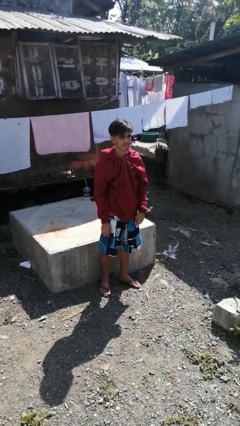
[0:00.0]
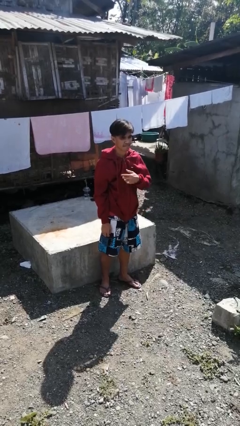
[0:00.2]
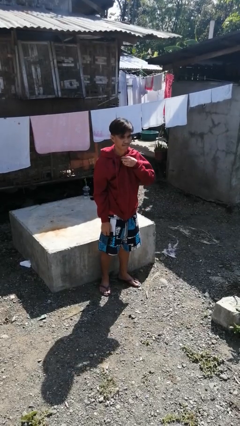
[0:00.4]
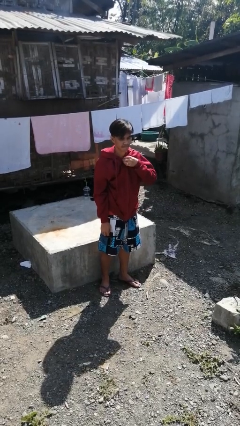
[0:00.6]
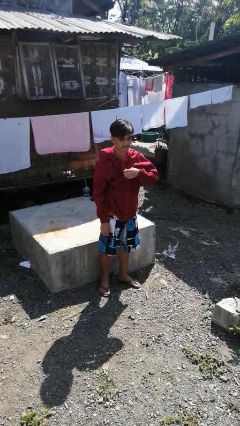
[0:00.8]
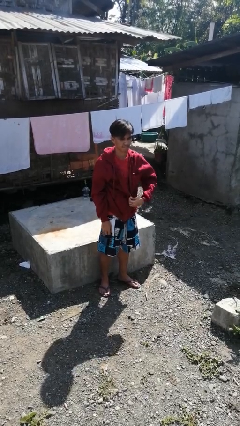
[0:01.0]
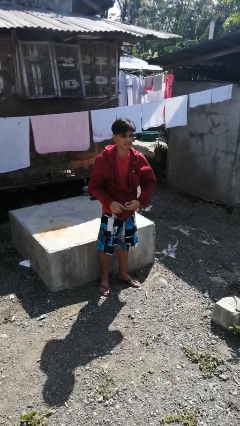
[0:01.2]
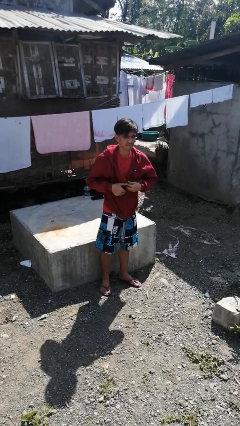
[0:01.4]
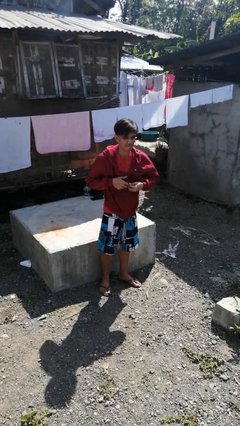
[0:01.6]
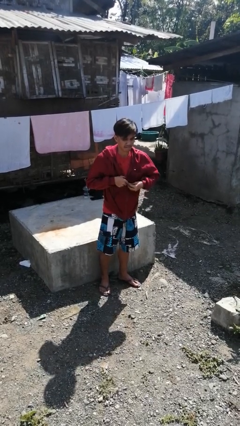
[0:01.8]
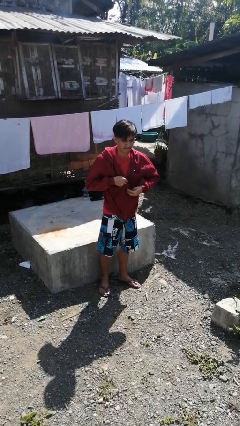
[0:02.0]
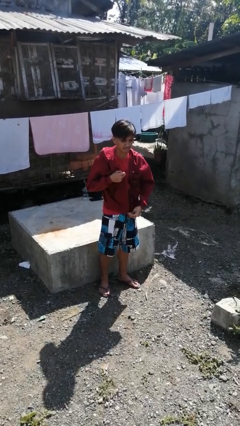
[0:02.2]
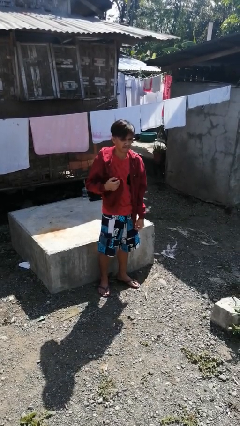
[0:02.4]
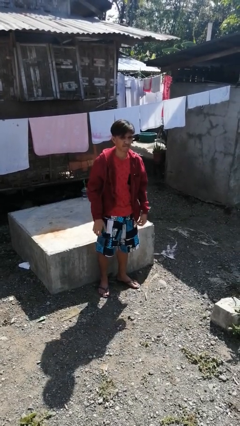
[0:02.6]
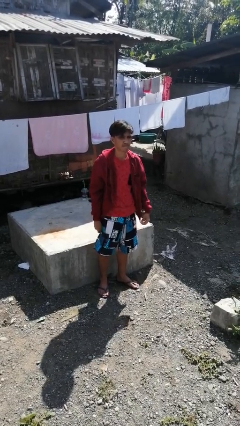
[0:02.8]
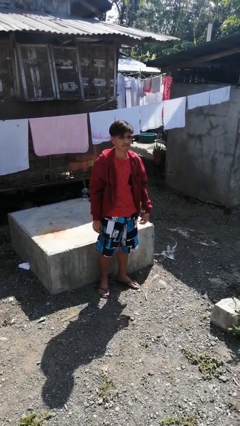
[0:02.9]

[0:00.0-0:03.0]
person unzips jacket

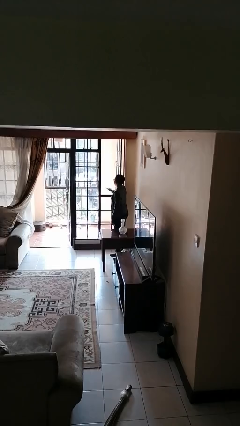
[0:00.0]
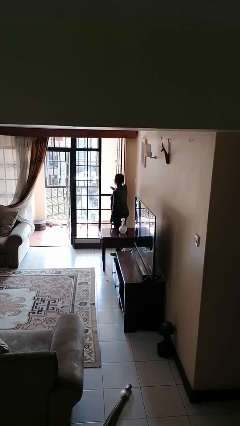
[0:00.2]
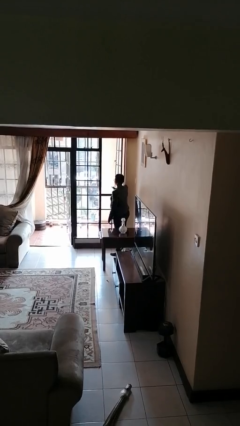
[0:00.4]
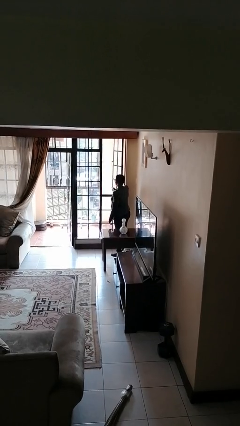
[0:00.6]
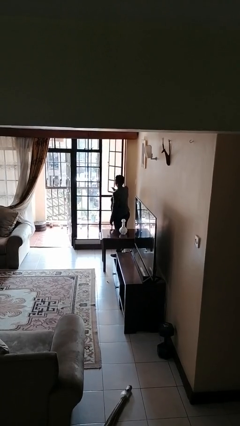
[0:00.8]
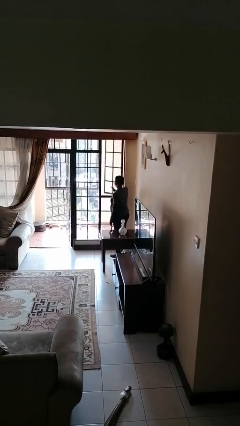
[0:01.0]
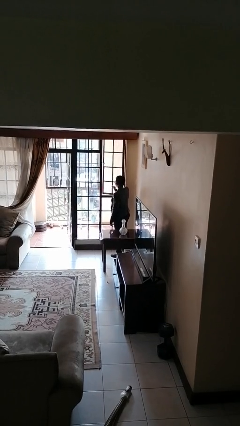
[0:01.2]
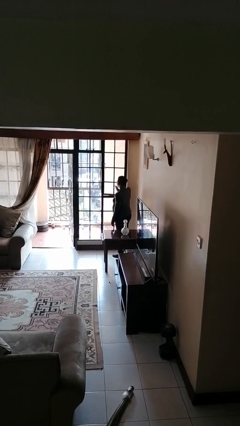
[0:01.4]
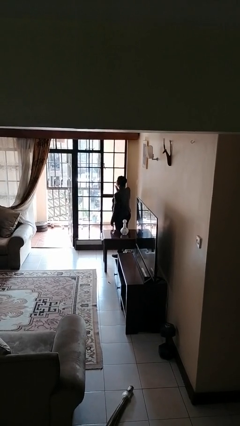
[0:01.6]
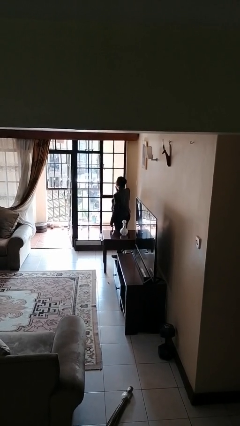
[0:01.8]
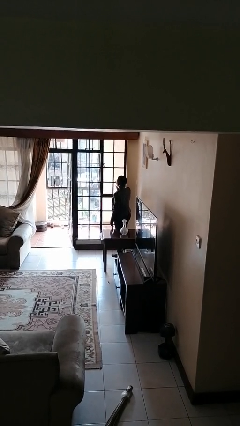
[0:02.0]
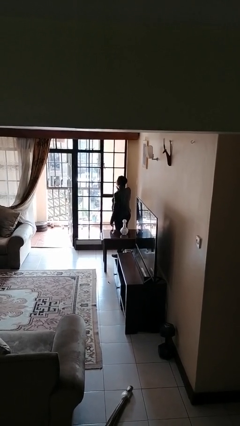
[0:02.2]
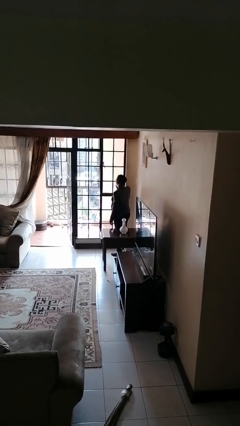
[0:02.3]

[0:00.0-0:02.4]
person closes home window

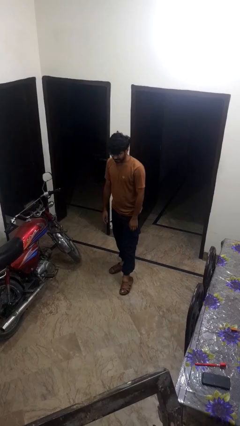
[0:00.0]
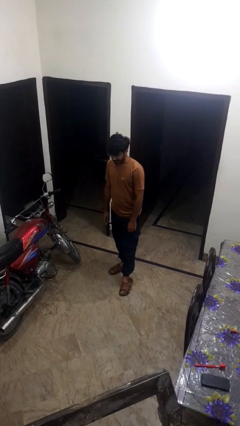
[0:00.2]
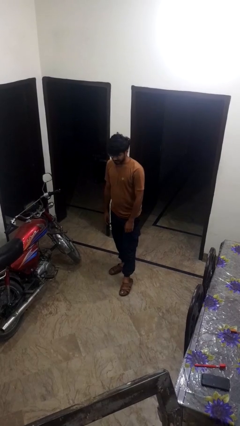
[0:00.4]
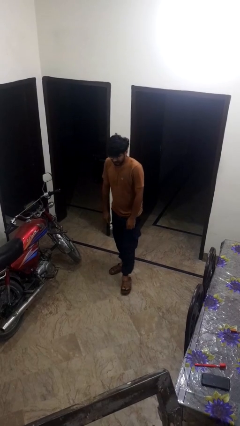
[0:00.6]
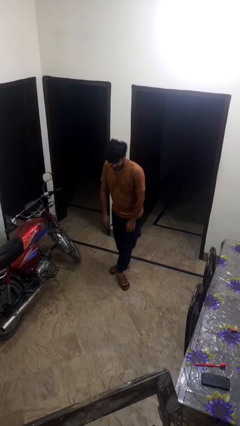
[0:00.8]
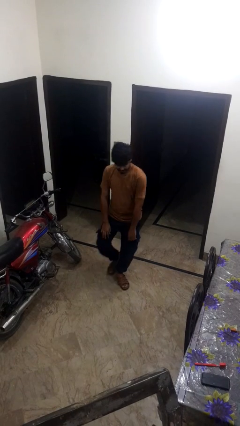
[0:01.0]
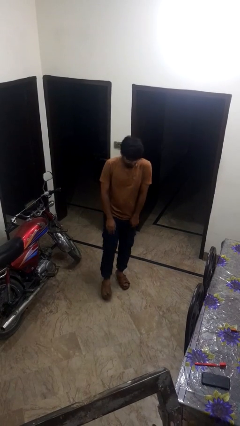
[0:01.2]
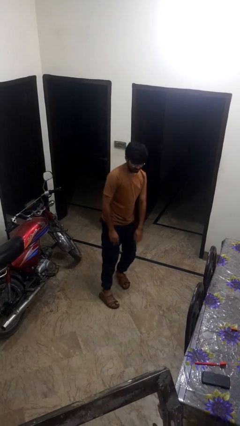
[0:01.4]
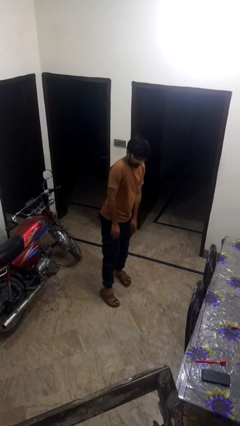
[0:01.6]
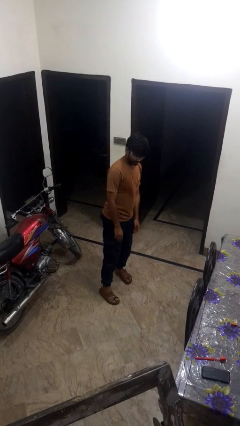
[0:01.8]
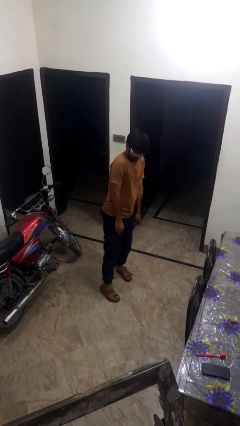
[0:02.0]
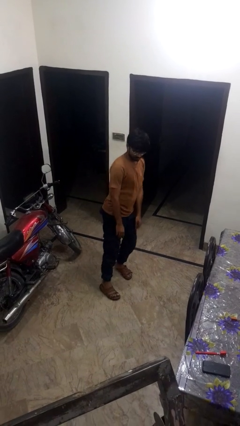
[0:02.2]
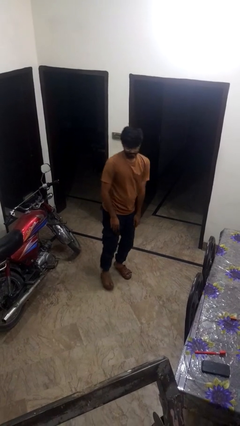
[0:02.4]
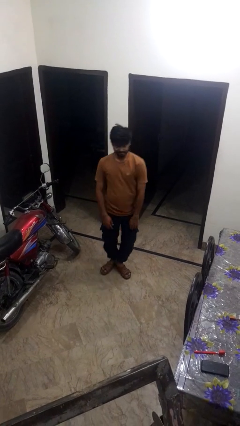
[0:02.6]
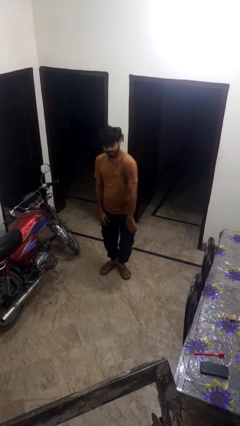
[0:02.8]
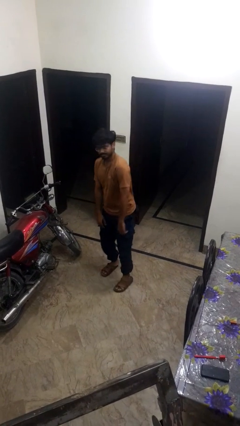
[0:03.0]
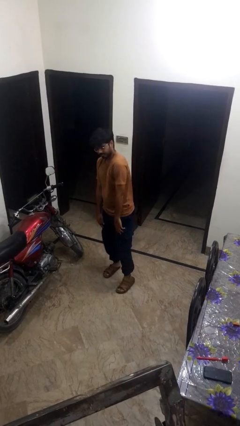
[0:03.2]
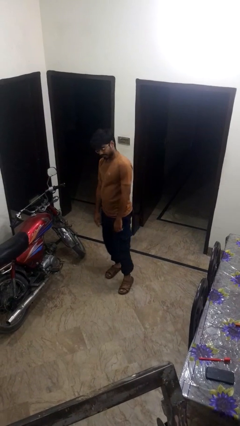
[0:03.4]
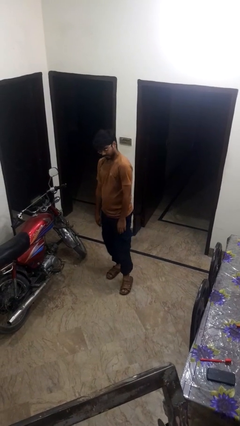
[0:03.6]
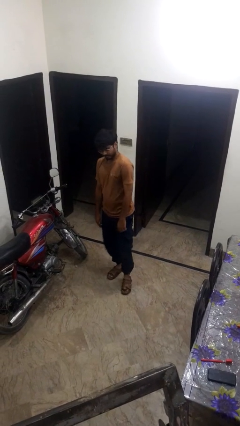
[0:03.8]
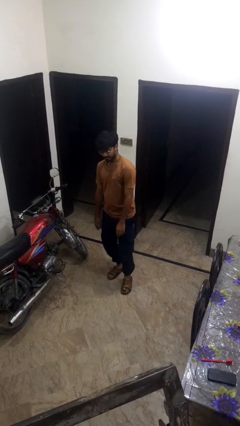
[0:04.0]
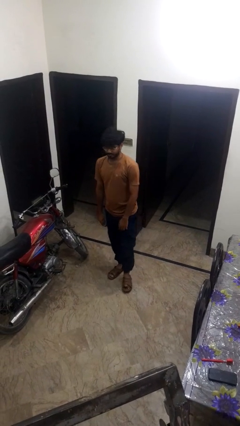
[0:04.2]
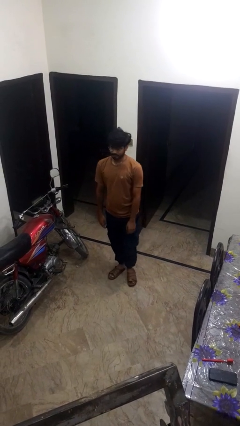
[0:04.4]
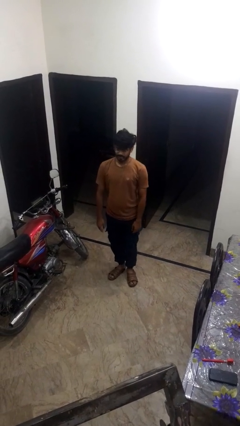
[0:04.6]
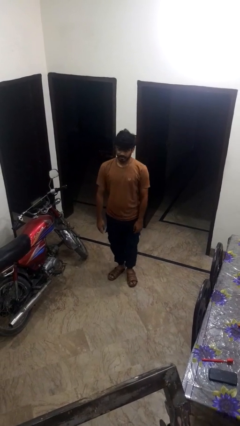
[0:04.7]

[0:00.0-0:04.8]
person dances in place

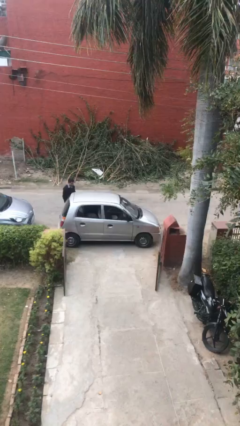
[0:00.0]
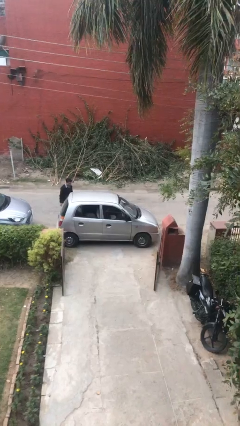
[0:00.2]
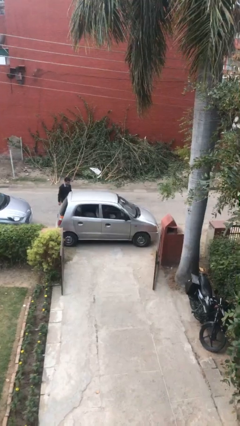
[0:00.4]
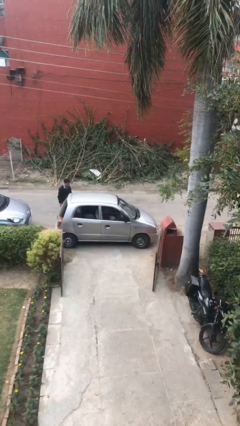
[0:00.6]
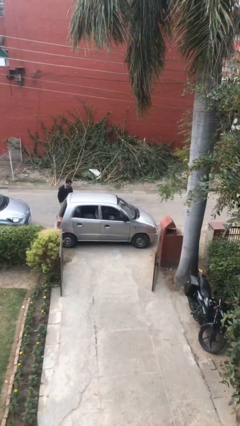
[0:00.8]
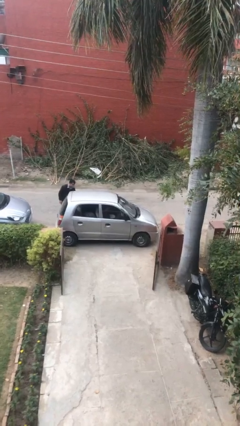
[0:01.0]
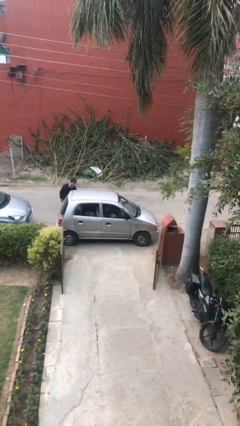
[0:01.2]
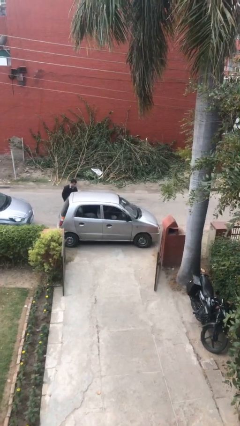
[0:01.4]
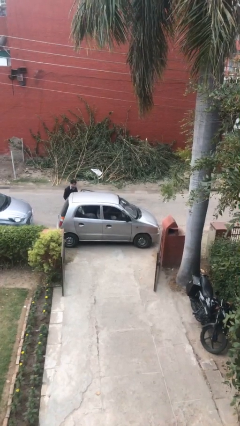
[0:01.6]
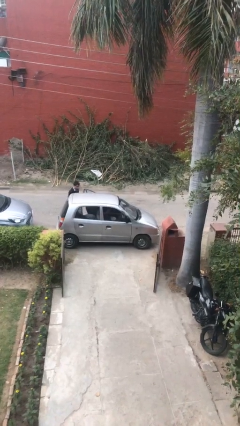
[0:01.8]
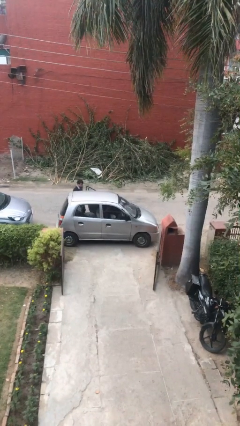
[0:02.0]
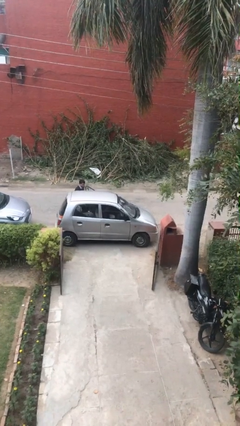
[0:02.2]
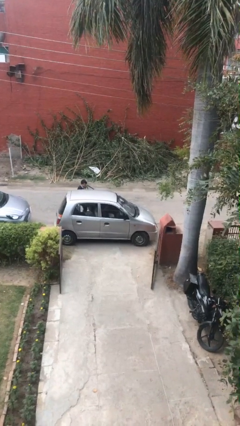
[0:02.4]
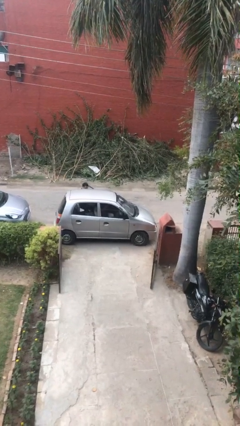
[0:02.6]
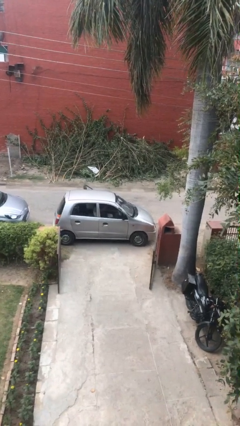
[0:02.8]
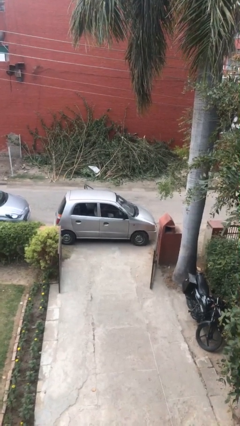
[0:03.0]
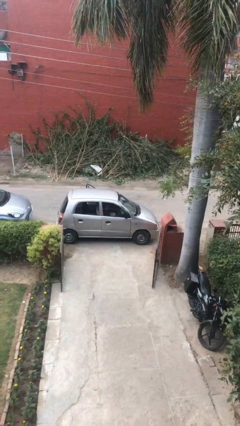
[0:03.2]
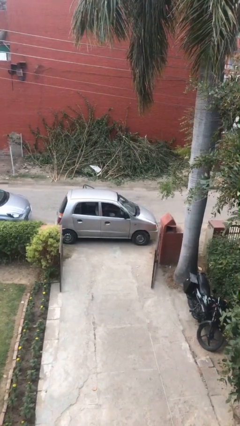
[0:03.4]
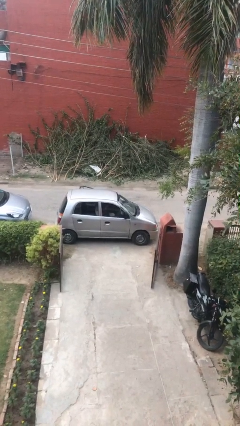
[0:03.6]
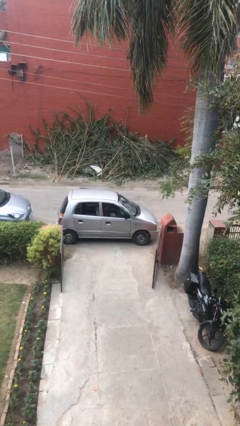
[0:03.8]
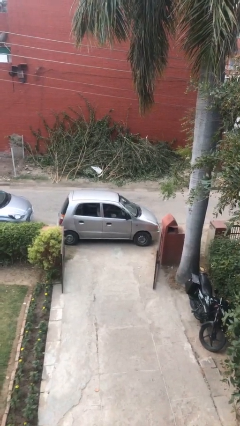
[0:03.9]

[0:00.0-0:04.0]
car picks up person

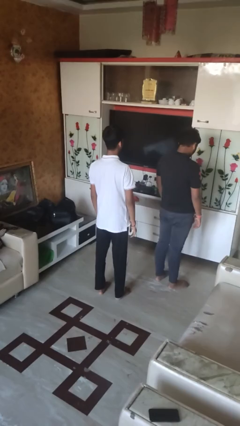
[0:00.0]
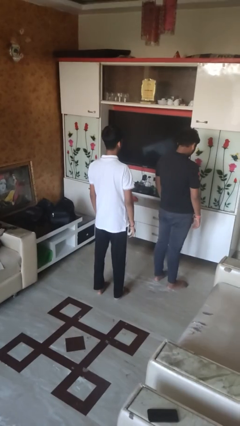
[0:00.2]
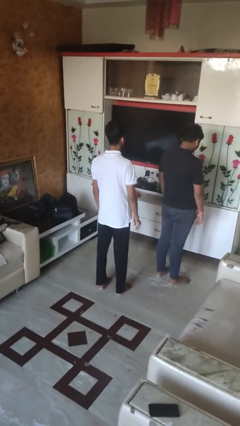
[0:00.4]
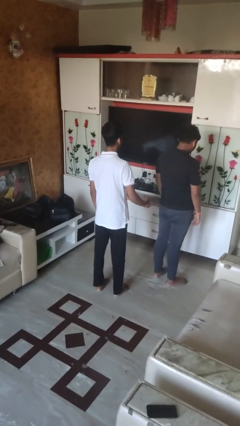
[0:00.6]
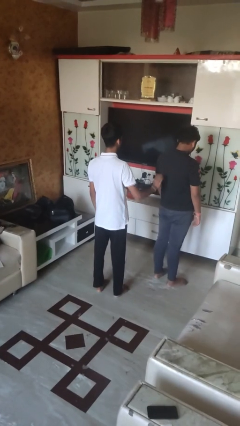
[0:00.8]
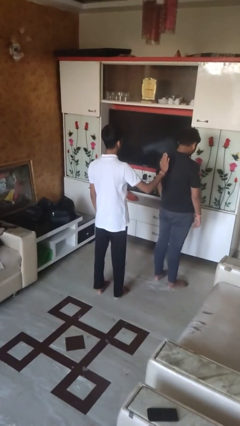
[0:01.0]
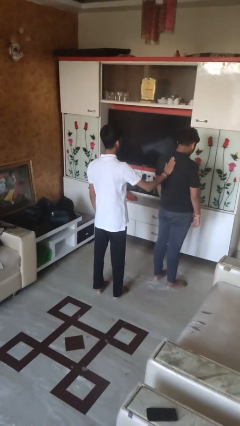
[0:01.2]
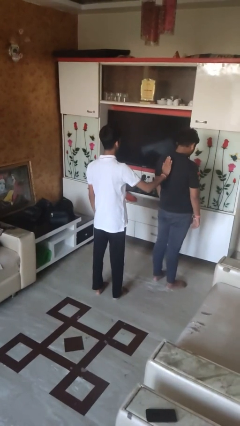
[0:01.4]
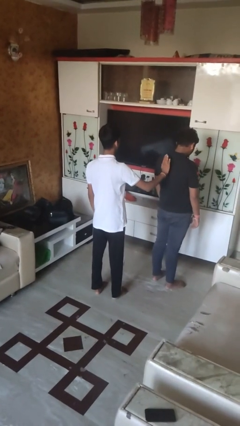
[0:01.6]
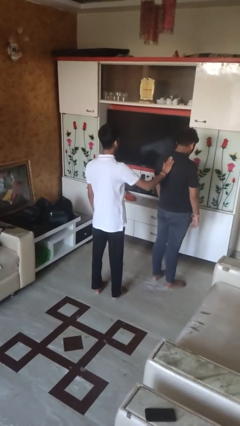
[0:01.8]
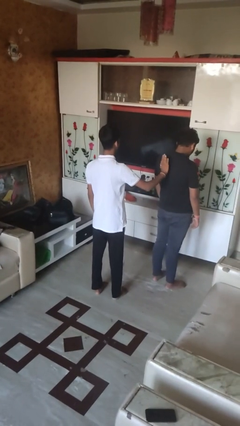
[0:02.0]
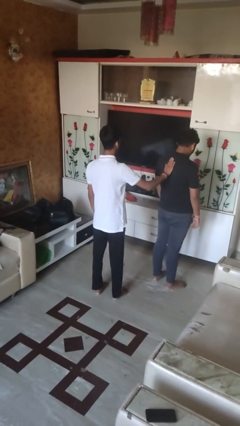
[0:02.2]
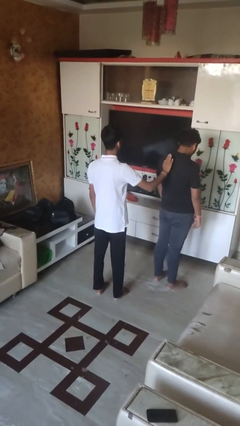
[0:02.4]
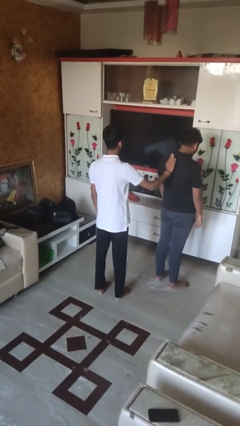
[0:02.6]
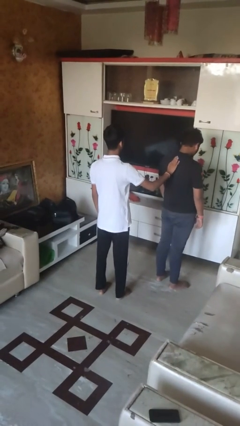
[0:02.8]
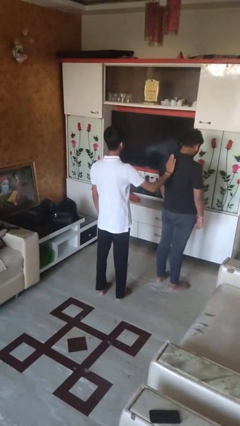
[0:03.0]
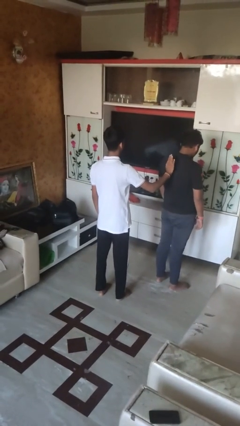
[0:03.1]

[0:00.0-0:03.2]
person touches back of person
